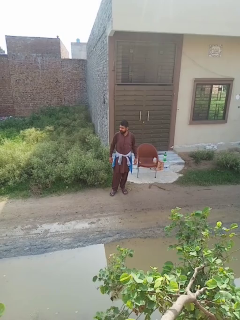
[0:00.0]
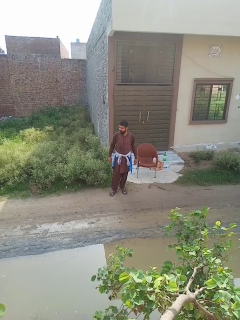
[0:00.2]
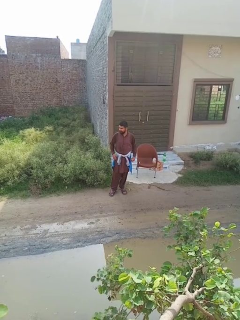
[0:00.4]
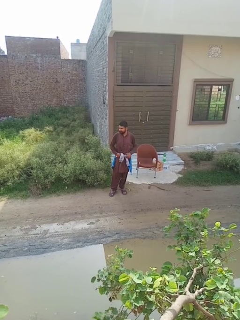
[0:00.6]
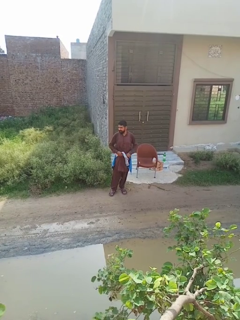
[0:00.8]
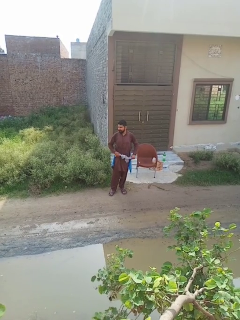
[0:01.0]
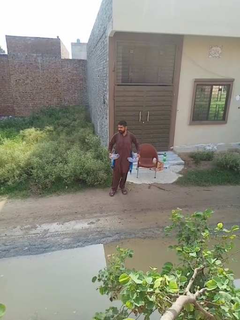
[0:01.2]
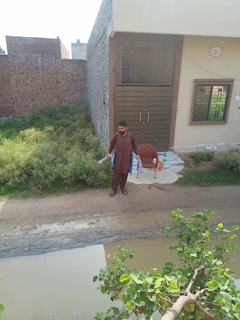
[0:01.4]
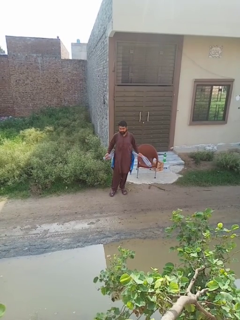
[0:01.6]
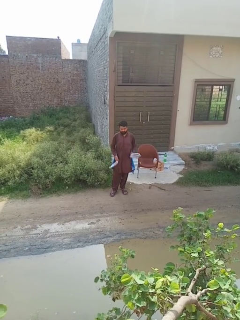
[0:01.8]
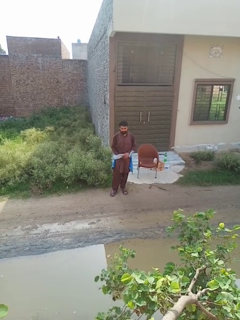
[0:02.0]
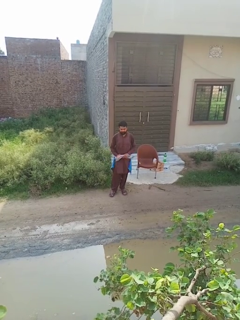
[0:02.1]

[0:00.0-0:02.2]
person unties jacket around waist

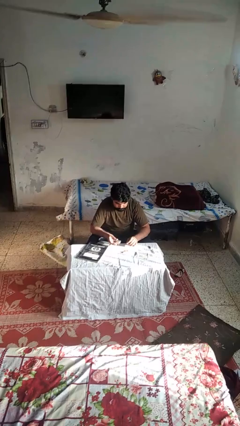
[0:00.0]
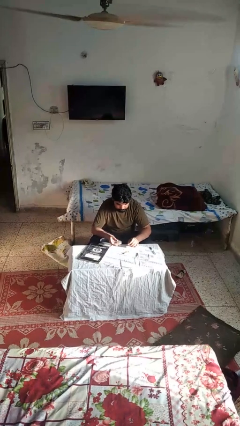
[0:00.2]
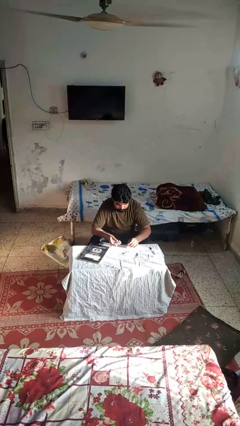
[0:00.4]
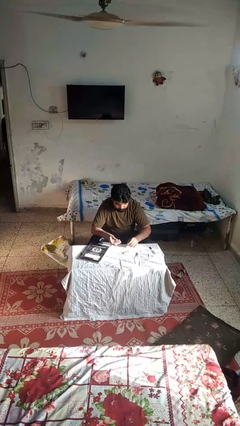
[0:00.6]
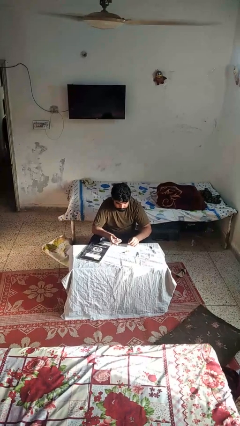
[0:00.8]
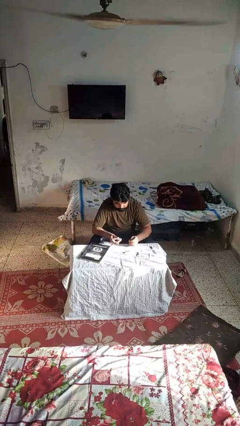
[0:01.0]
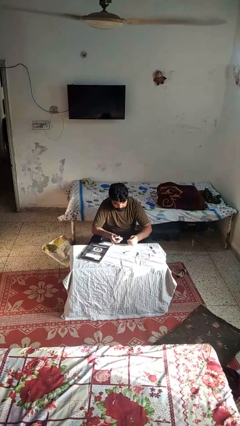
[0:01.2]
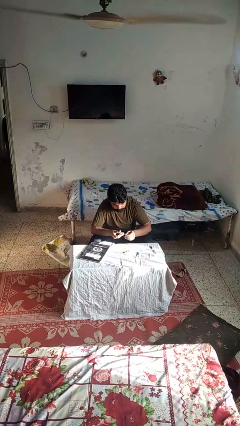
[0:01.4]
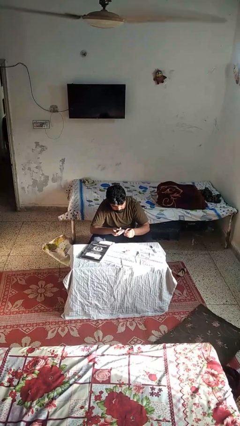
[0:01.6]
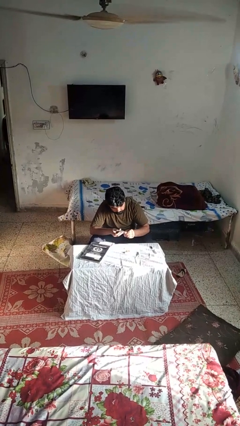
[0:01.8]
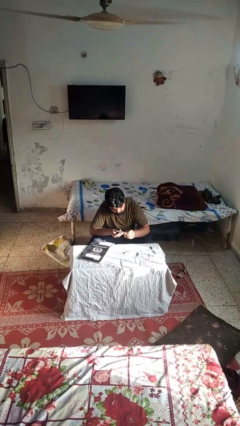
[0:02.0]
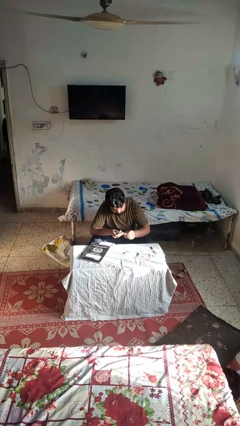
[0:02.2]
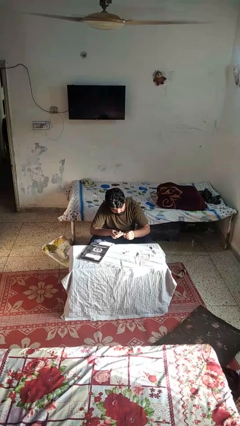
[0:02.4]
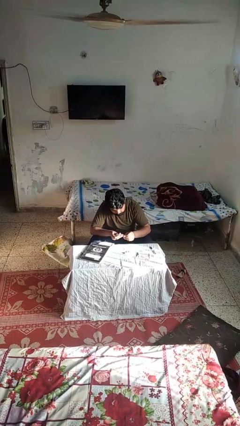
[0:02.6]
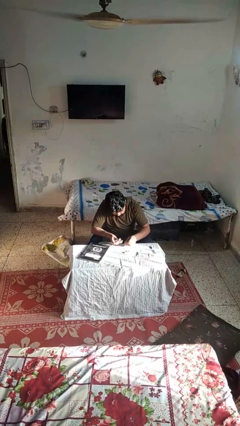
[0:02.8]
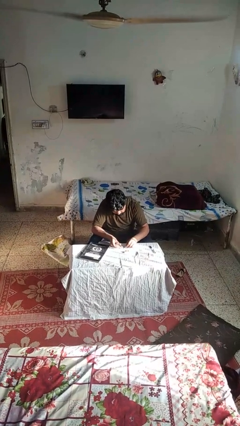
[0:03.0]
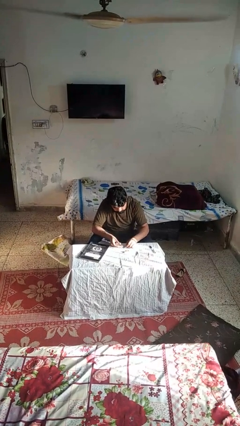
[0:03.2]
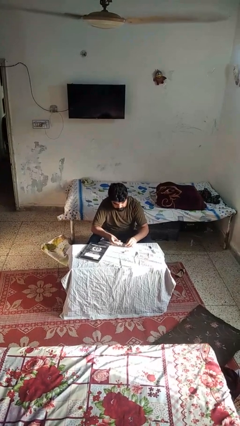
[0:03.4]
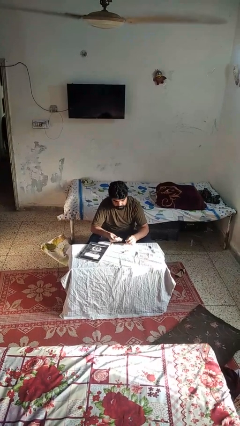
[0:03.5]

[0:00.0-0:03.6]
person clips fingernails

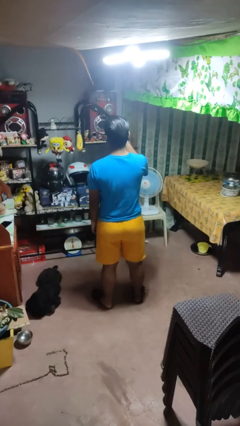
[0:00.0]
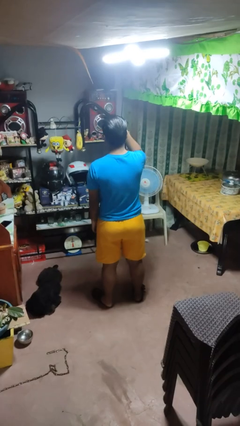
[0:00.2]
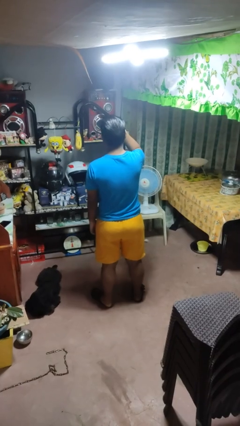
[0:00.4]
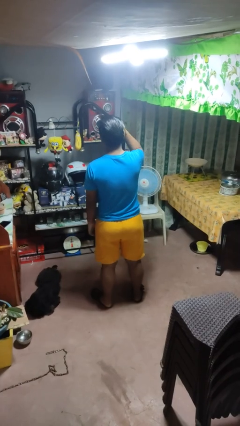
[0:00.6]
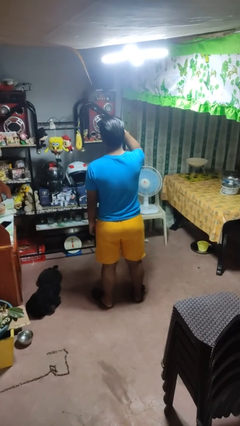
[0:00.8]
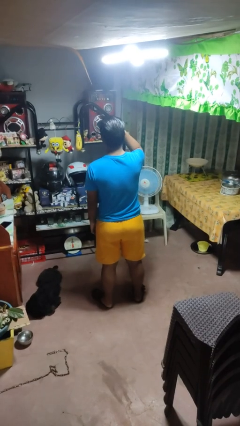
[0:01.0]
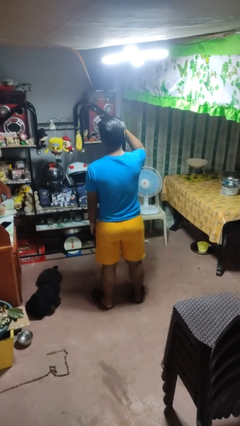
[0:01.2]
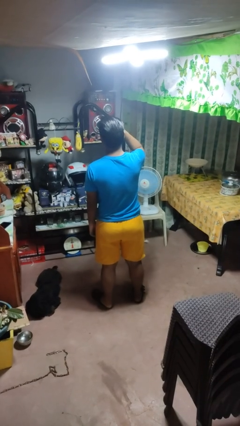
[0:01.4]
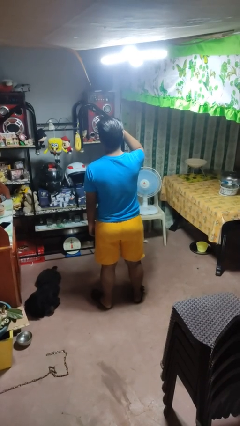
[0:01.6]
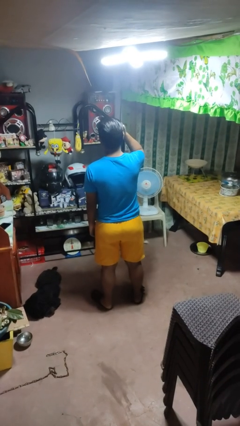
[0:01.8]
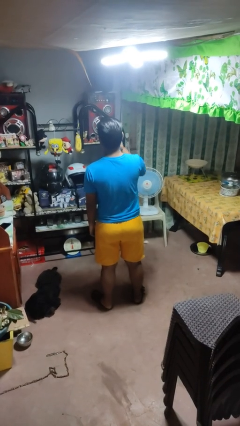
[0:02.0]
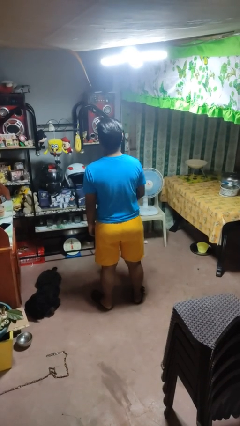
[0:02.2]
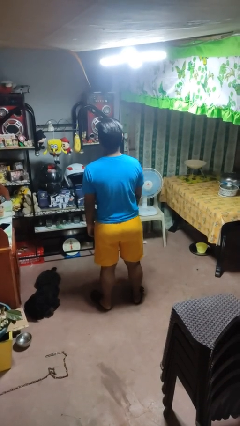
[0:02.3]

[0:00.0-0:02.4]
person scratches face

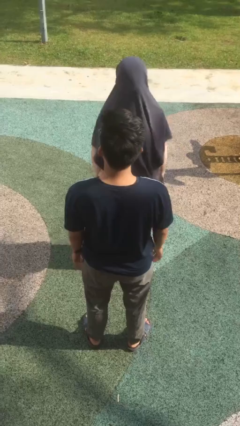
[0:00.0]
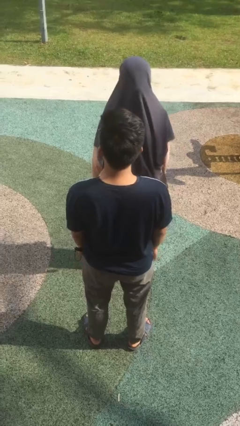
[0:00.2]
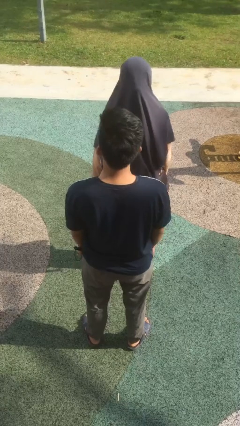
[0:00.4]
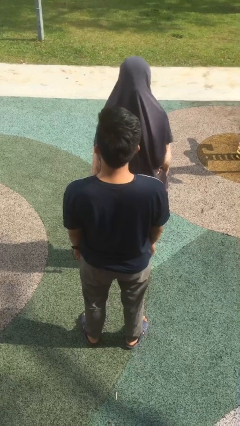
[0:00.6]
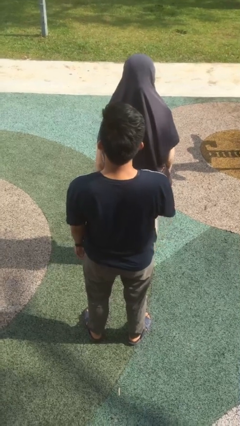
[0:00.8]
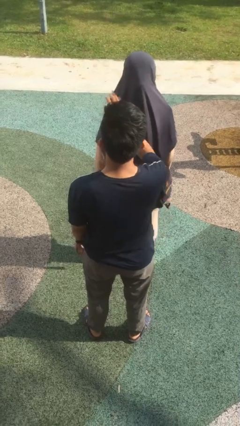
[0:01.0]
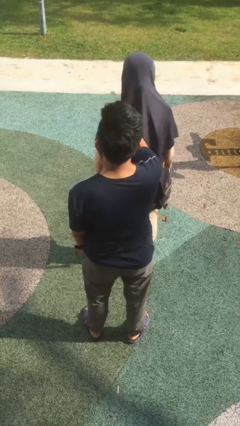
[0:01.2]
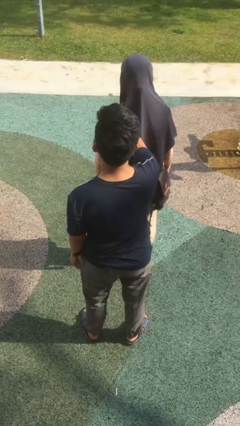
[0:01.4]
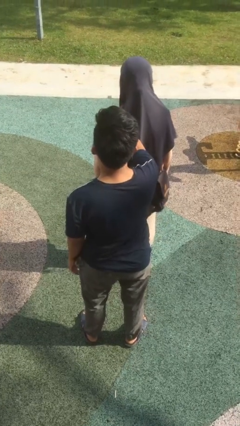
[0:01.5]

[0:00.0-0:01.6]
person grabs person by shoulder

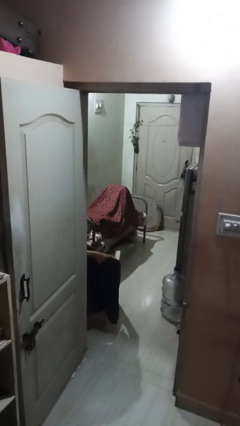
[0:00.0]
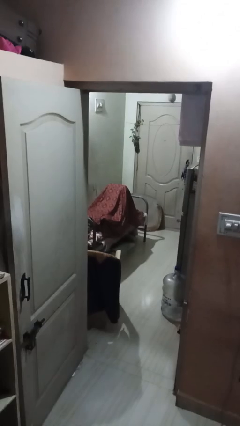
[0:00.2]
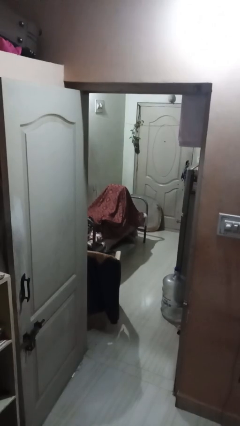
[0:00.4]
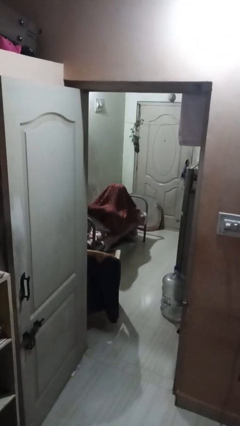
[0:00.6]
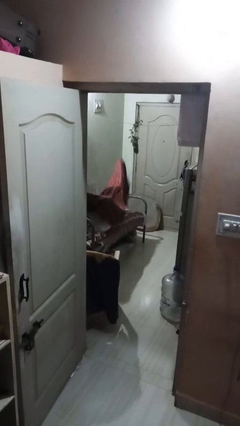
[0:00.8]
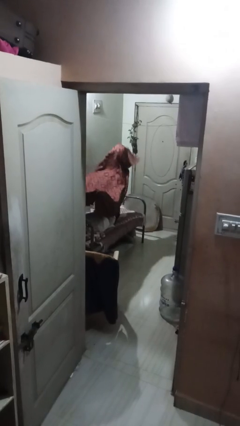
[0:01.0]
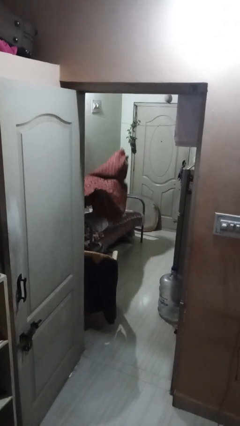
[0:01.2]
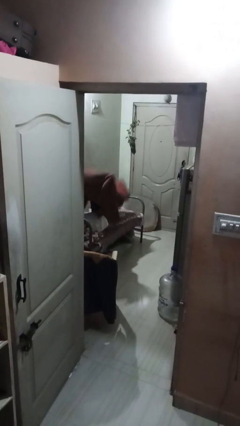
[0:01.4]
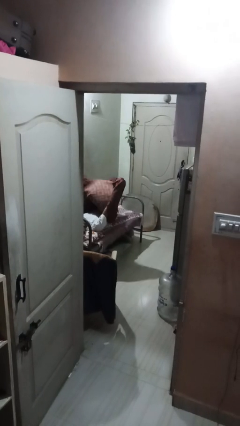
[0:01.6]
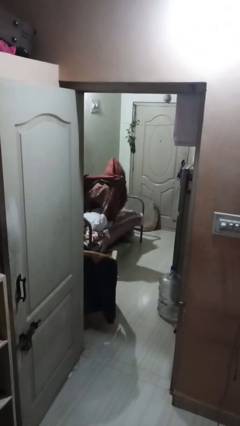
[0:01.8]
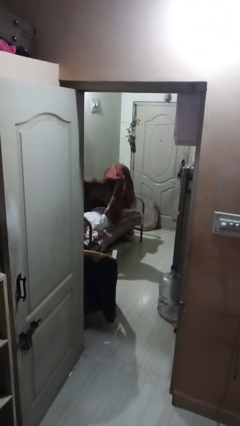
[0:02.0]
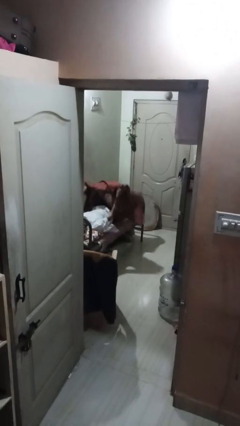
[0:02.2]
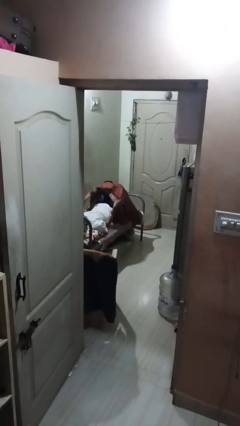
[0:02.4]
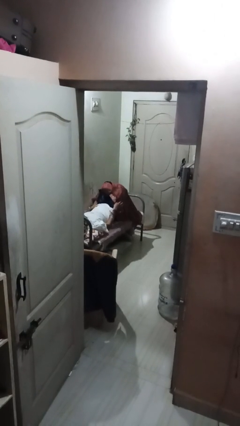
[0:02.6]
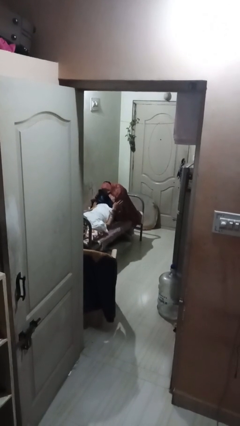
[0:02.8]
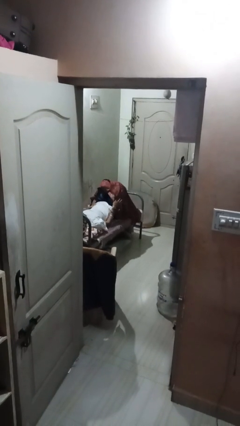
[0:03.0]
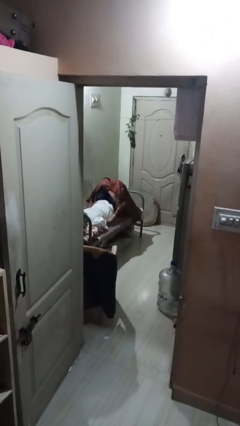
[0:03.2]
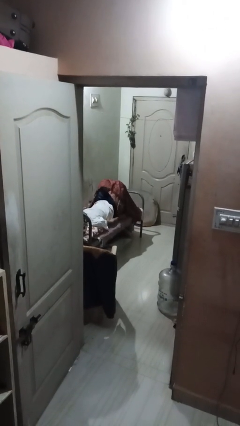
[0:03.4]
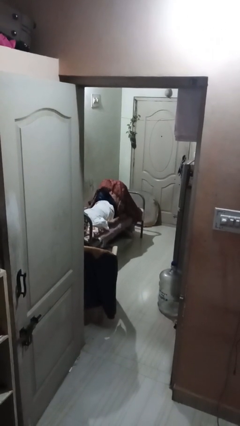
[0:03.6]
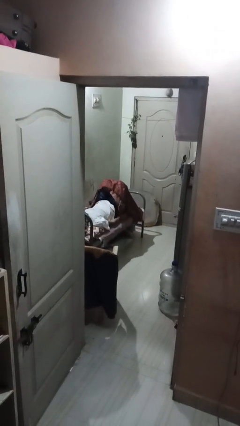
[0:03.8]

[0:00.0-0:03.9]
person uncovers with bedsheets

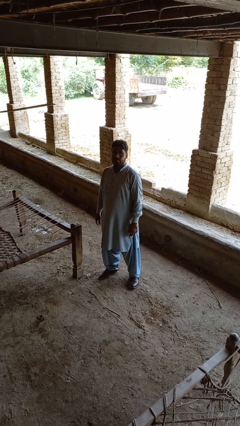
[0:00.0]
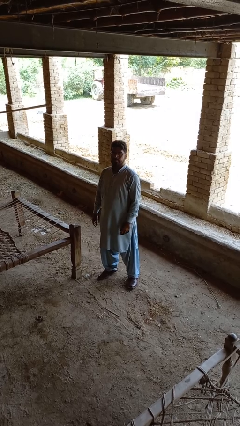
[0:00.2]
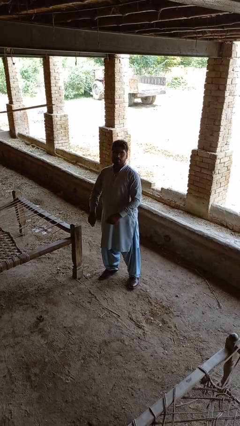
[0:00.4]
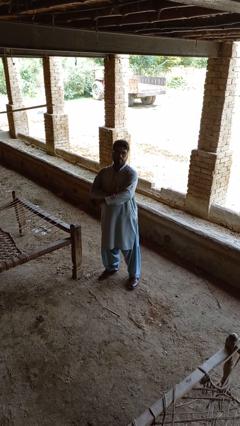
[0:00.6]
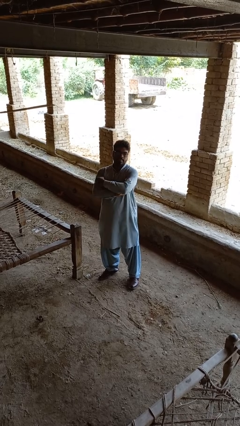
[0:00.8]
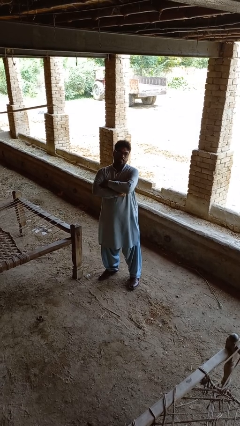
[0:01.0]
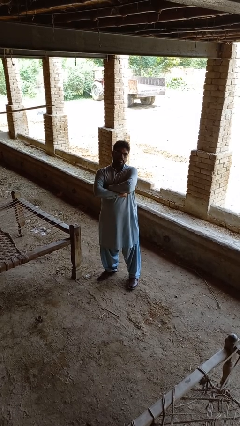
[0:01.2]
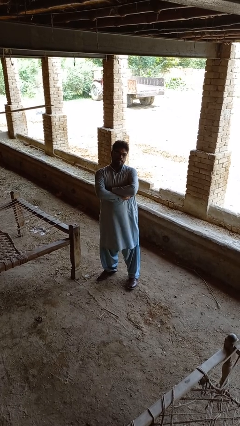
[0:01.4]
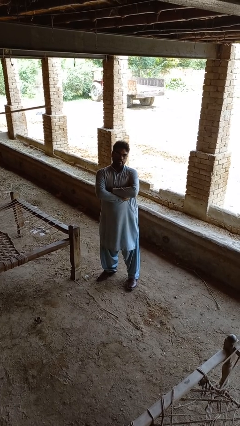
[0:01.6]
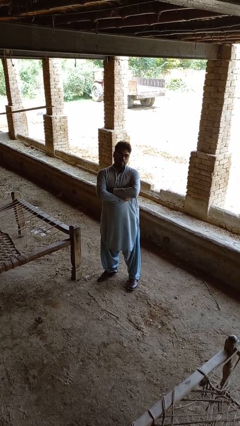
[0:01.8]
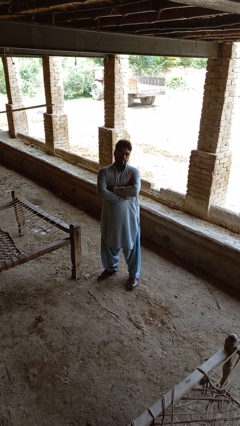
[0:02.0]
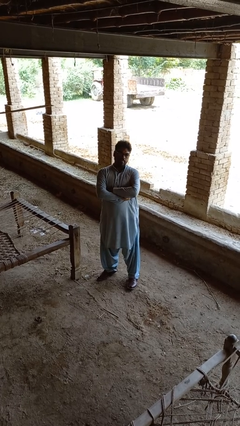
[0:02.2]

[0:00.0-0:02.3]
person crosses arms

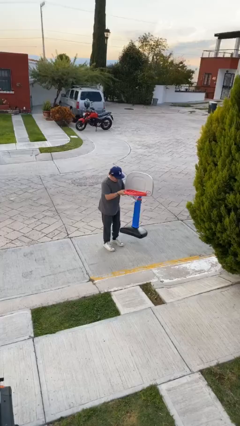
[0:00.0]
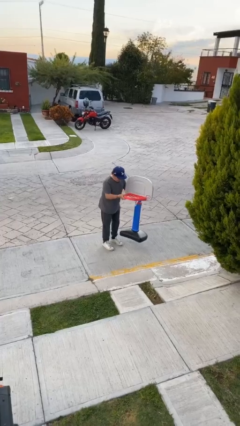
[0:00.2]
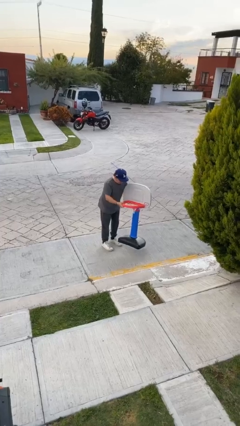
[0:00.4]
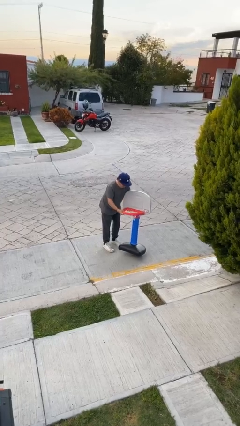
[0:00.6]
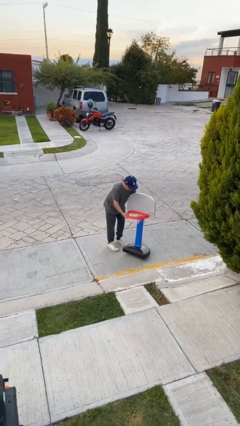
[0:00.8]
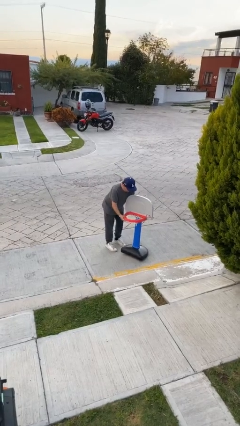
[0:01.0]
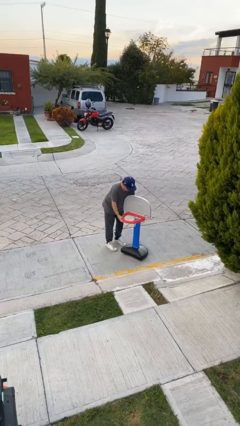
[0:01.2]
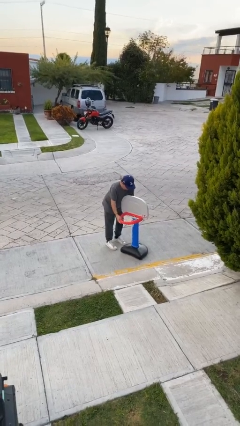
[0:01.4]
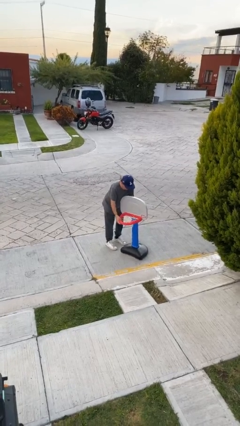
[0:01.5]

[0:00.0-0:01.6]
person puts down object on floor
